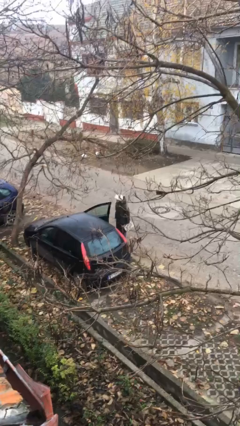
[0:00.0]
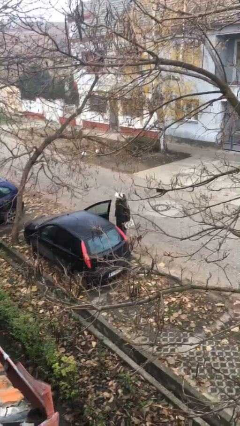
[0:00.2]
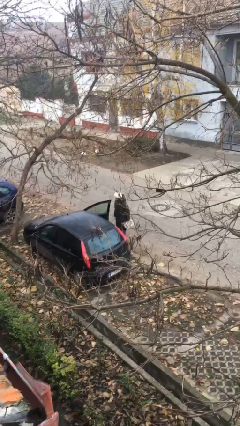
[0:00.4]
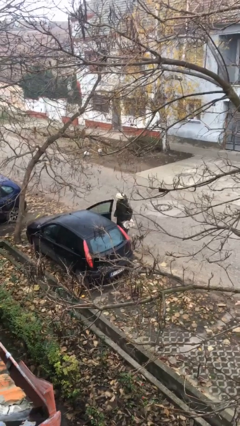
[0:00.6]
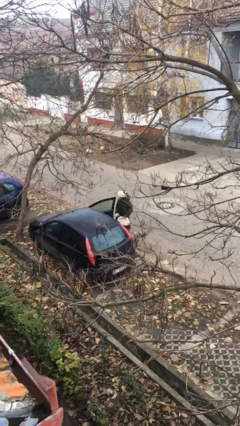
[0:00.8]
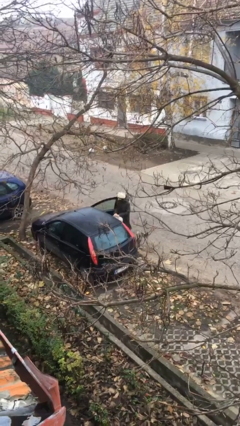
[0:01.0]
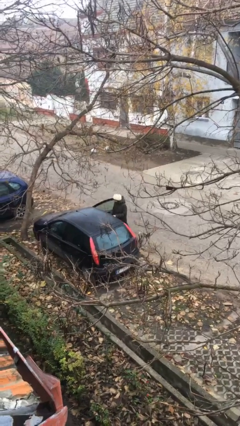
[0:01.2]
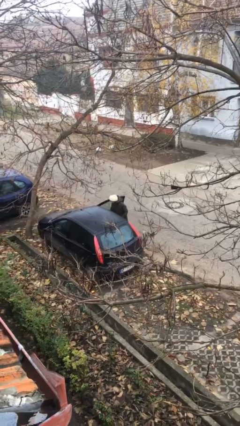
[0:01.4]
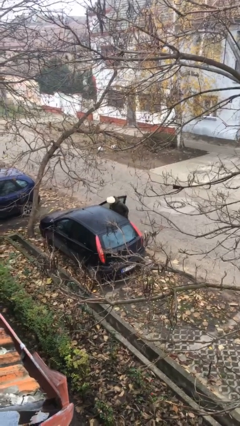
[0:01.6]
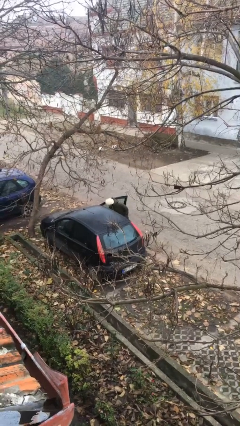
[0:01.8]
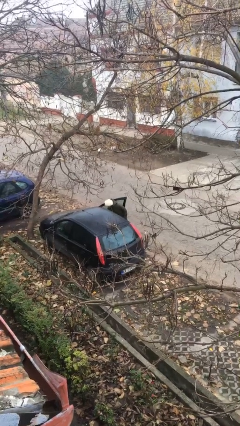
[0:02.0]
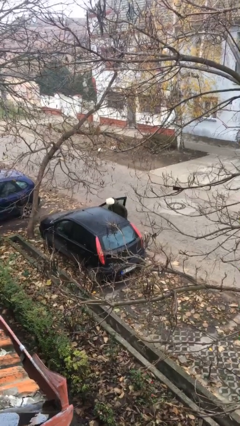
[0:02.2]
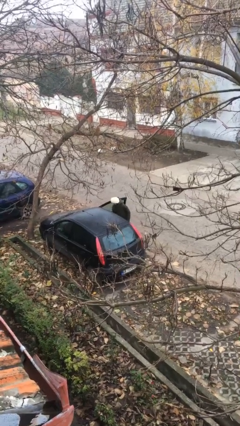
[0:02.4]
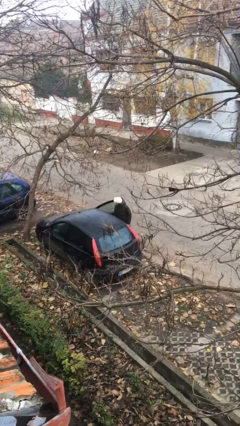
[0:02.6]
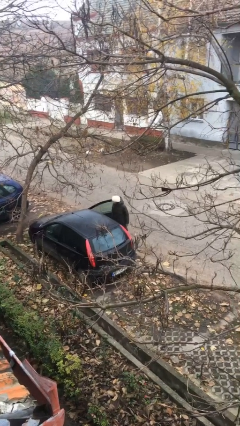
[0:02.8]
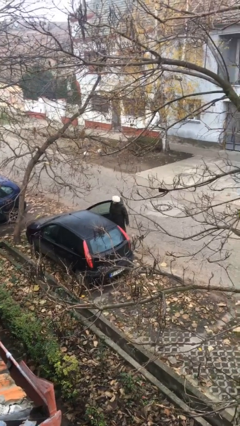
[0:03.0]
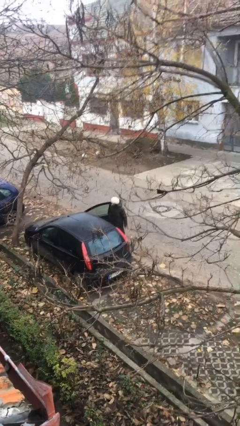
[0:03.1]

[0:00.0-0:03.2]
person loads car

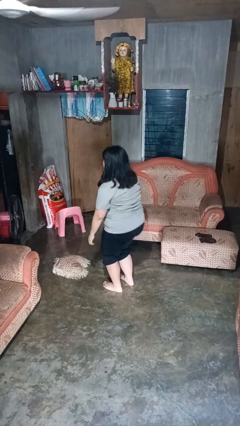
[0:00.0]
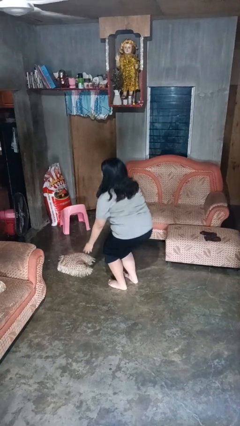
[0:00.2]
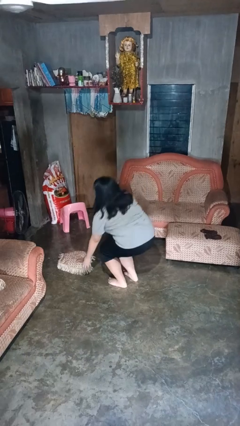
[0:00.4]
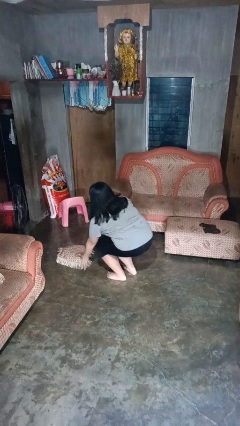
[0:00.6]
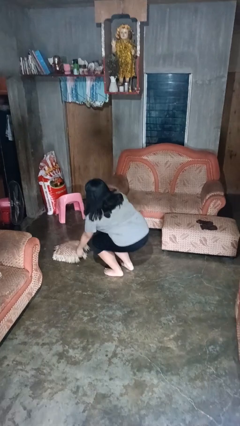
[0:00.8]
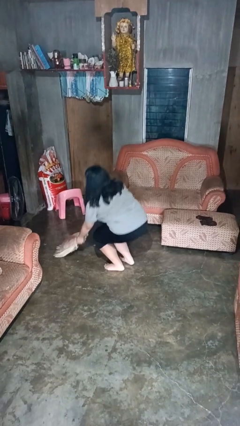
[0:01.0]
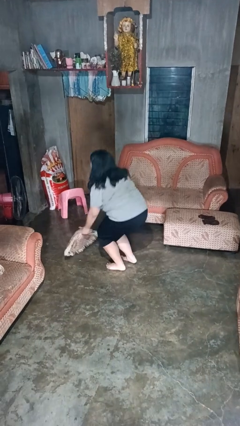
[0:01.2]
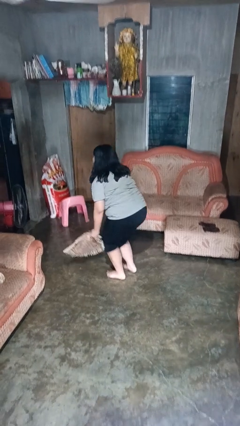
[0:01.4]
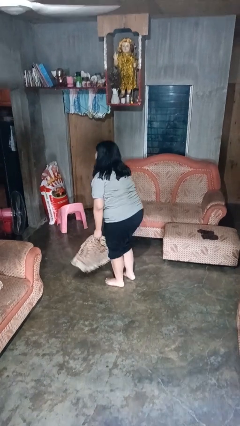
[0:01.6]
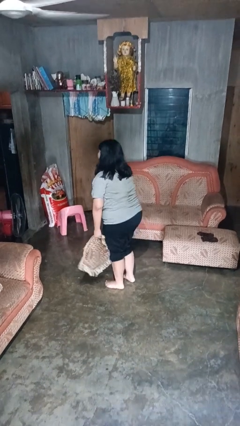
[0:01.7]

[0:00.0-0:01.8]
person picks up object from floor

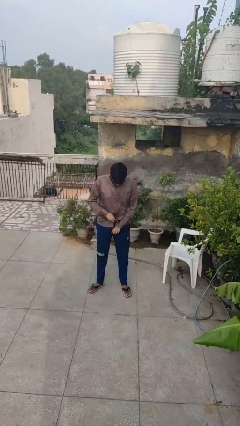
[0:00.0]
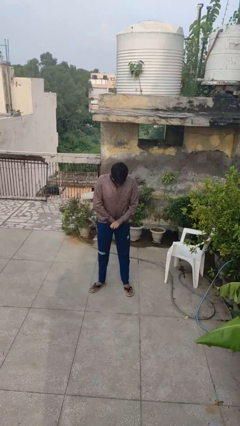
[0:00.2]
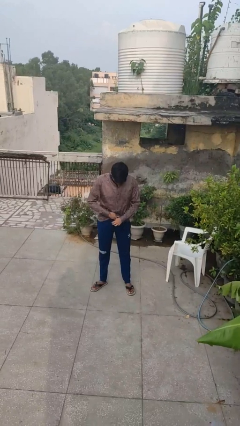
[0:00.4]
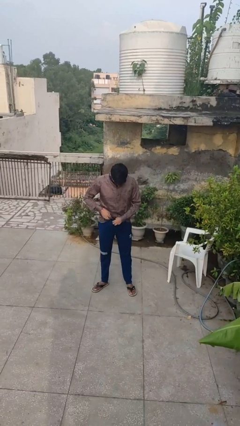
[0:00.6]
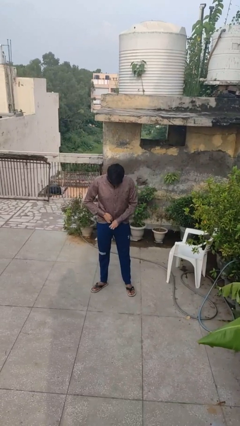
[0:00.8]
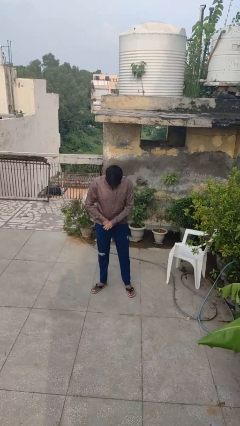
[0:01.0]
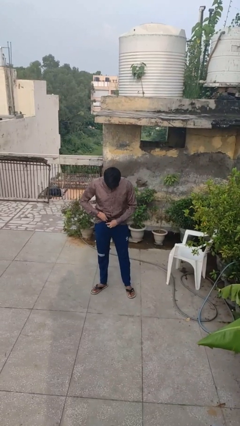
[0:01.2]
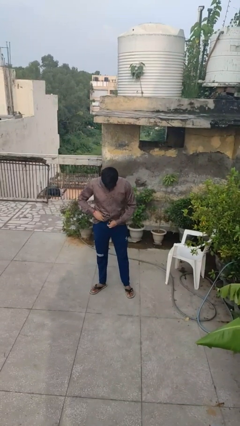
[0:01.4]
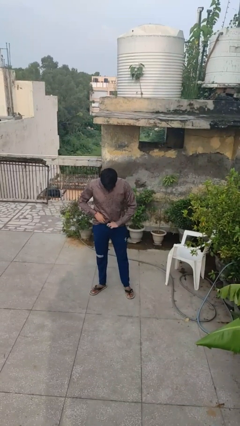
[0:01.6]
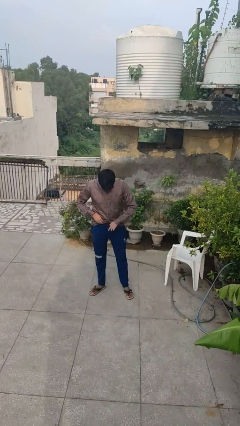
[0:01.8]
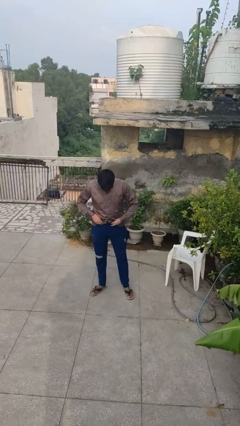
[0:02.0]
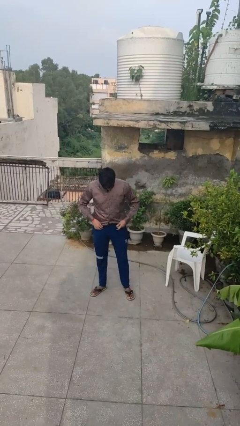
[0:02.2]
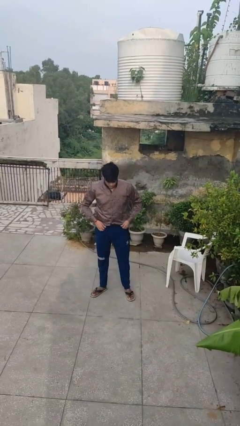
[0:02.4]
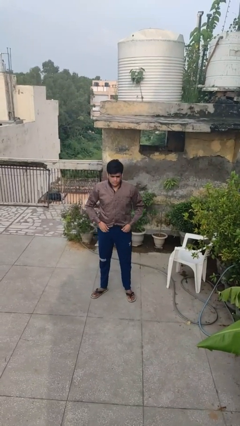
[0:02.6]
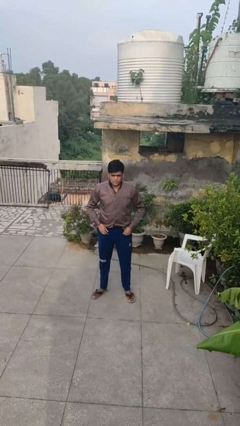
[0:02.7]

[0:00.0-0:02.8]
person tucks in shirt

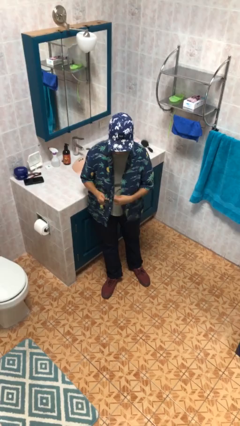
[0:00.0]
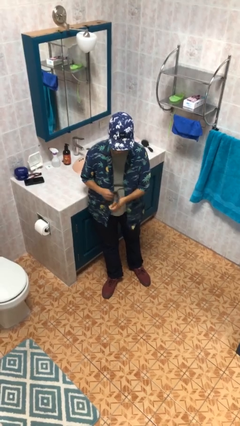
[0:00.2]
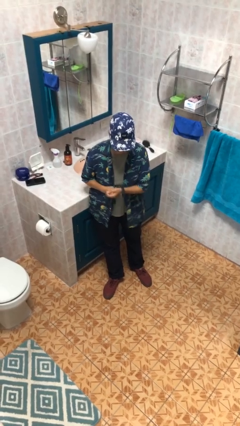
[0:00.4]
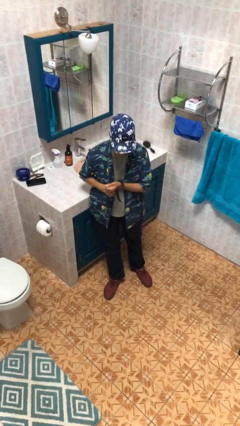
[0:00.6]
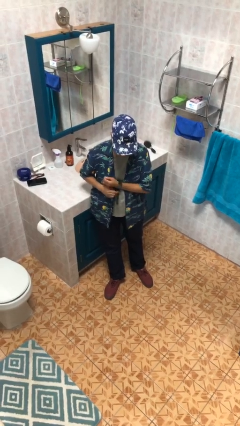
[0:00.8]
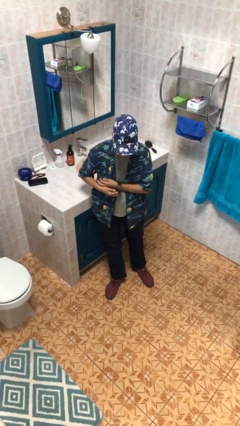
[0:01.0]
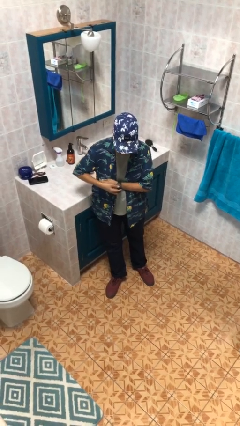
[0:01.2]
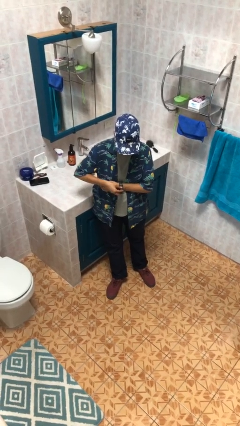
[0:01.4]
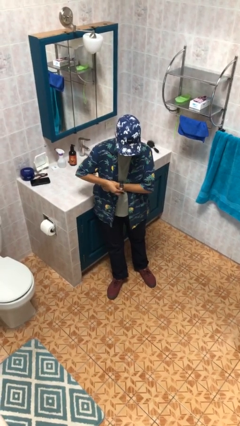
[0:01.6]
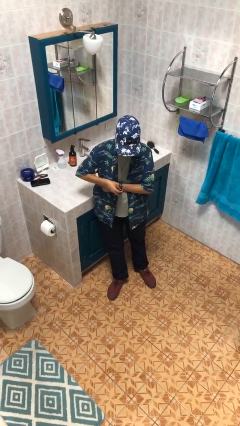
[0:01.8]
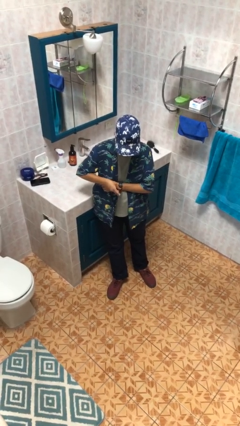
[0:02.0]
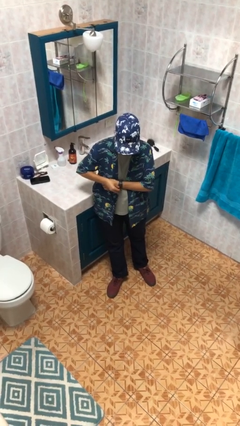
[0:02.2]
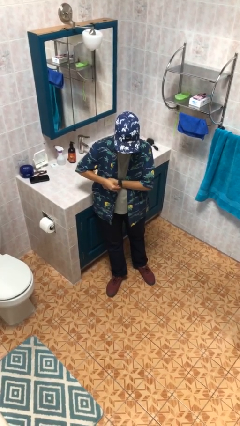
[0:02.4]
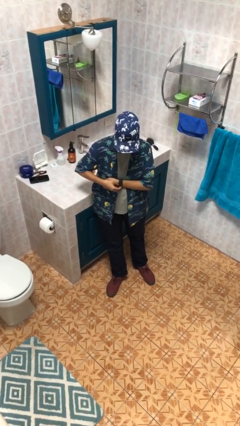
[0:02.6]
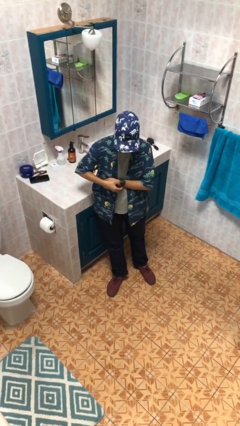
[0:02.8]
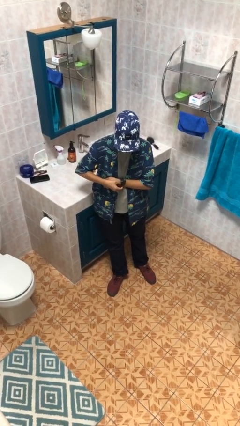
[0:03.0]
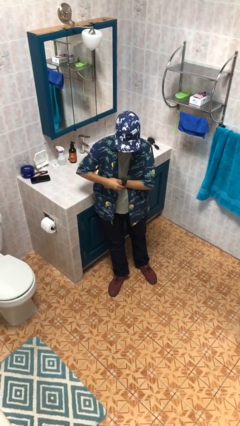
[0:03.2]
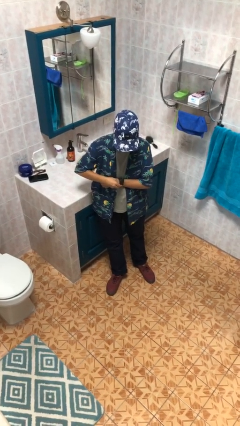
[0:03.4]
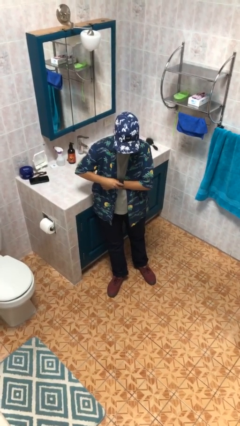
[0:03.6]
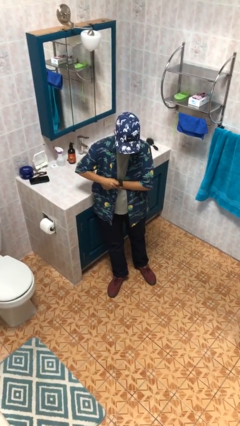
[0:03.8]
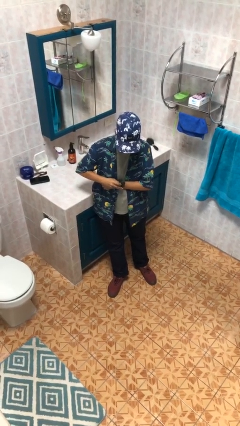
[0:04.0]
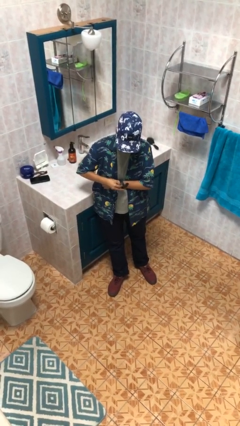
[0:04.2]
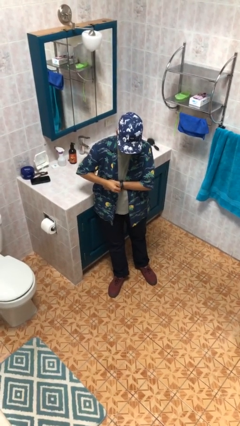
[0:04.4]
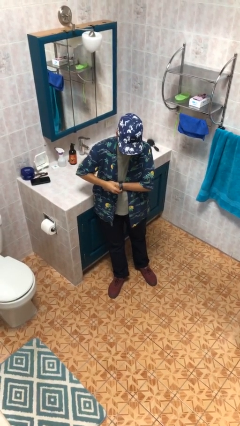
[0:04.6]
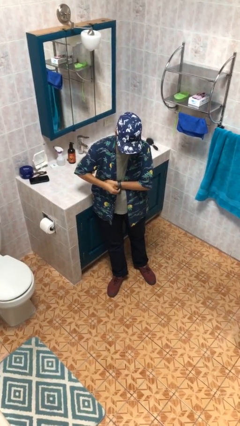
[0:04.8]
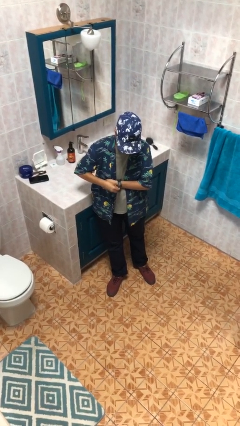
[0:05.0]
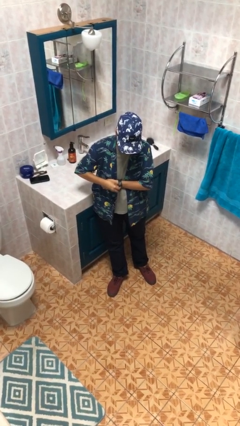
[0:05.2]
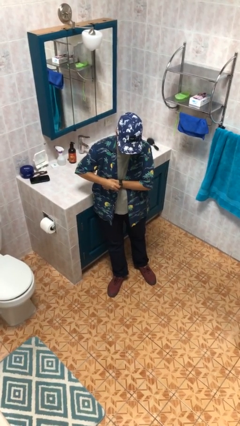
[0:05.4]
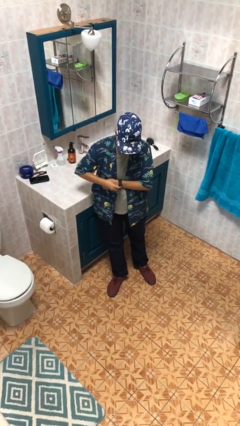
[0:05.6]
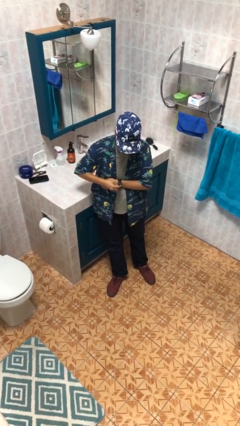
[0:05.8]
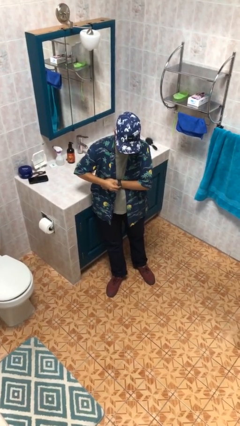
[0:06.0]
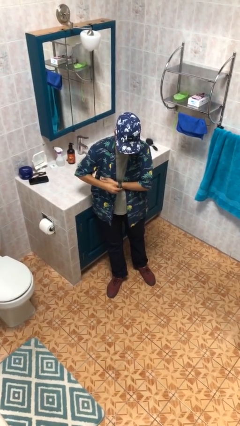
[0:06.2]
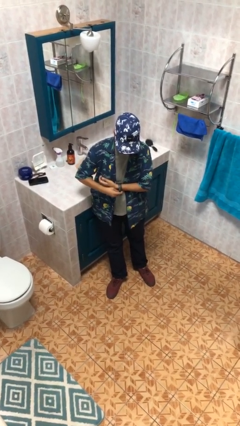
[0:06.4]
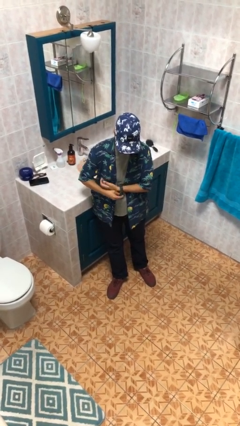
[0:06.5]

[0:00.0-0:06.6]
person puts on wristwatch

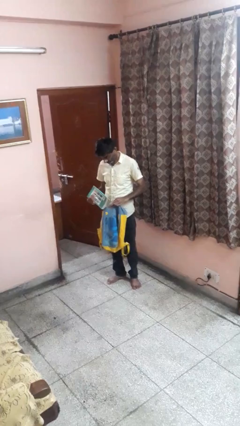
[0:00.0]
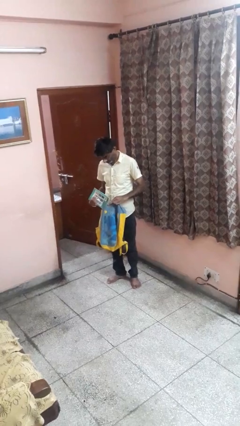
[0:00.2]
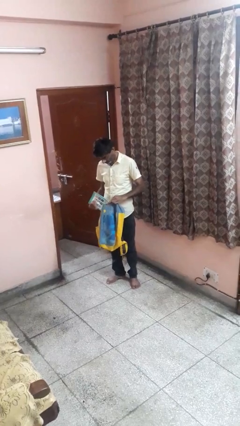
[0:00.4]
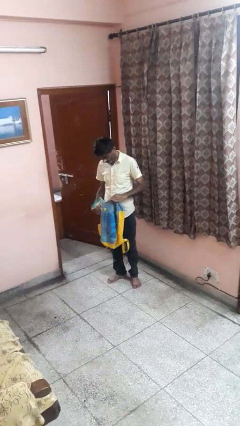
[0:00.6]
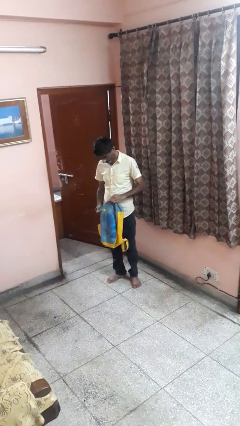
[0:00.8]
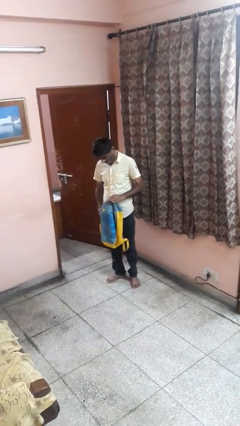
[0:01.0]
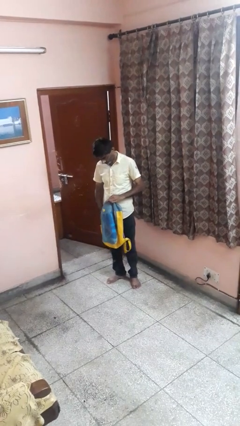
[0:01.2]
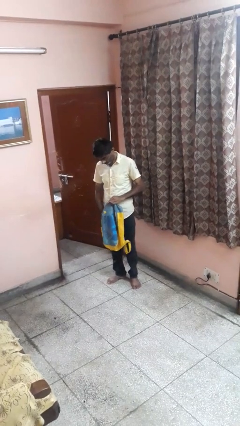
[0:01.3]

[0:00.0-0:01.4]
person puts object into backpack

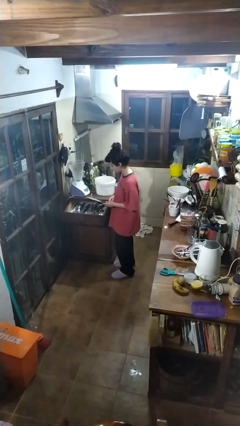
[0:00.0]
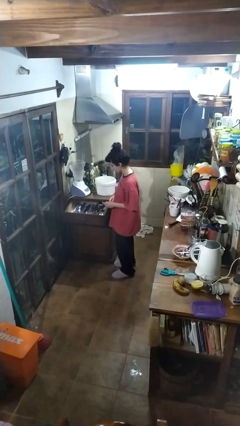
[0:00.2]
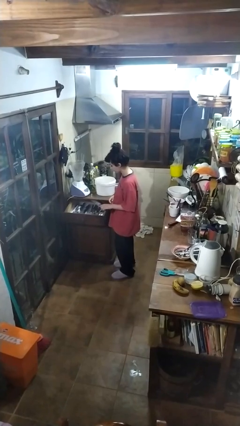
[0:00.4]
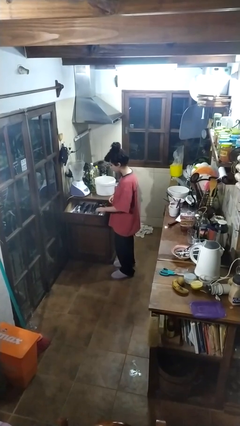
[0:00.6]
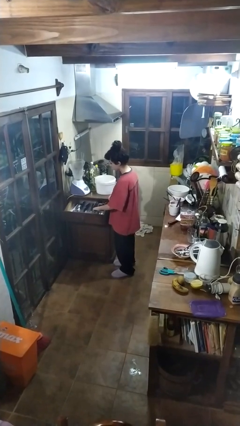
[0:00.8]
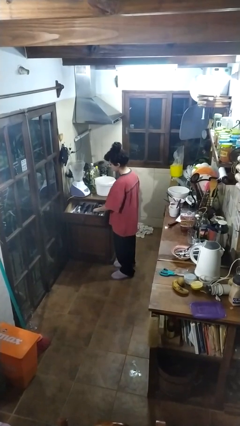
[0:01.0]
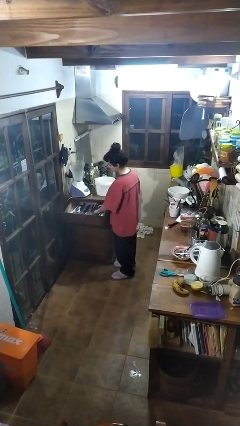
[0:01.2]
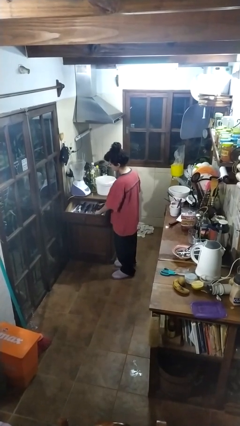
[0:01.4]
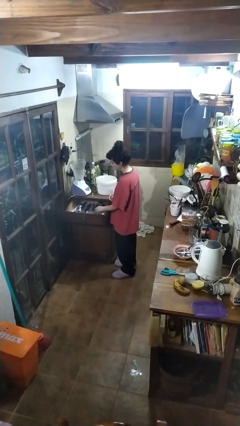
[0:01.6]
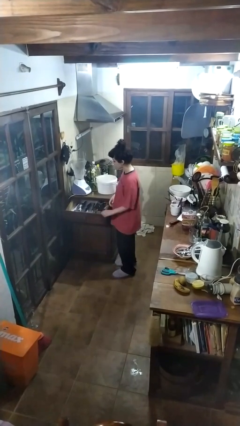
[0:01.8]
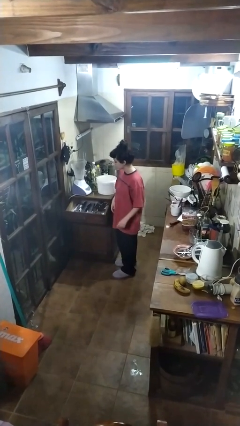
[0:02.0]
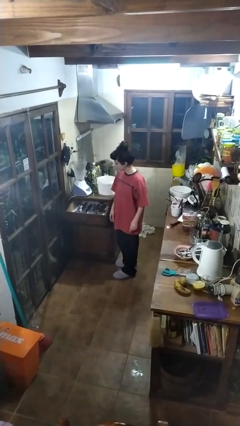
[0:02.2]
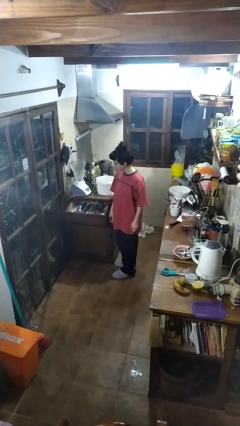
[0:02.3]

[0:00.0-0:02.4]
person puts object into kitchen drawer
